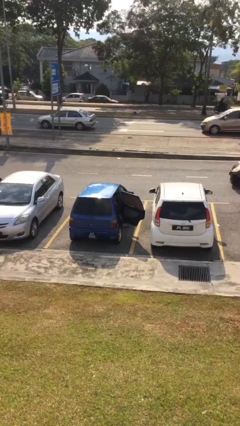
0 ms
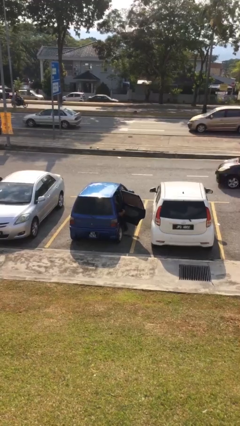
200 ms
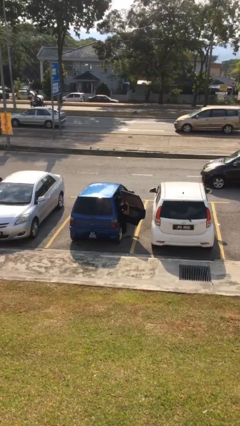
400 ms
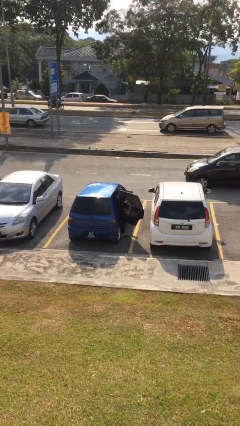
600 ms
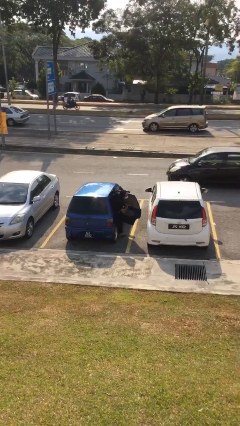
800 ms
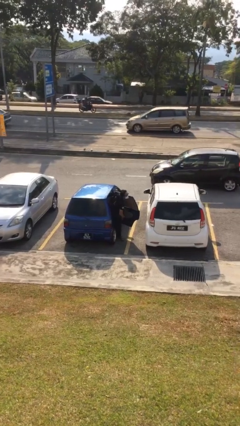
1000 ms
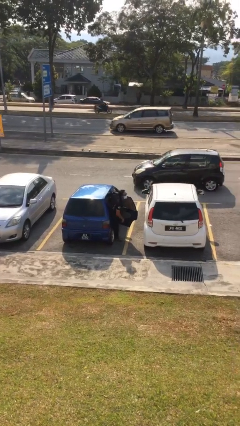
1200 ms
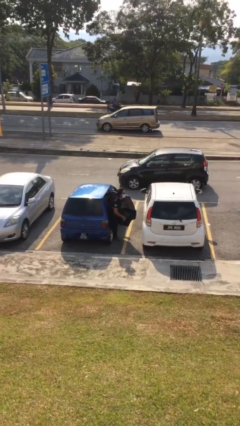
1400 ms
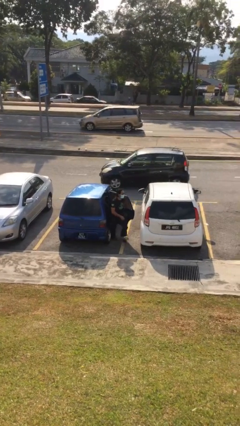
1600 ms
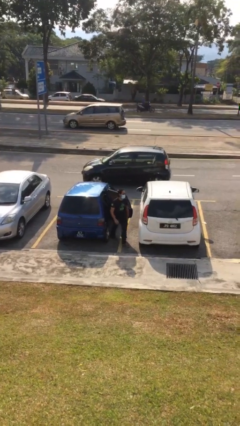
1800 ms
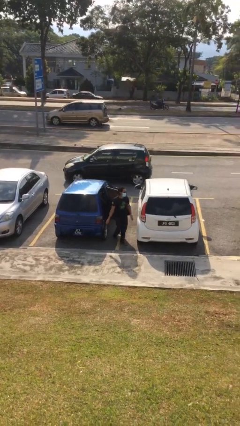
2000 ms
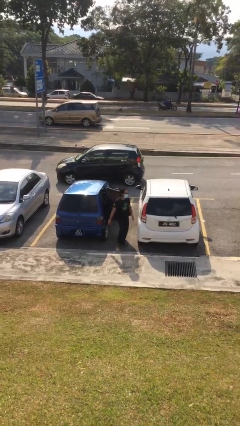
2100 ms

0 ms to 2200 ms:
person exits car

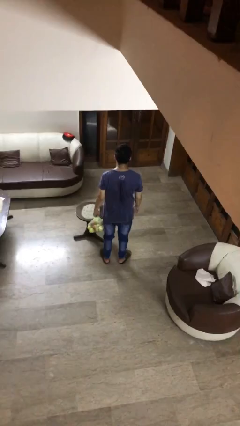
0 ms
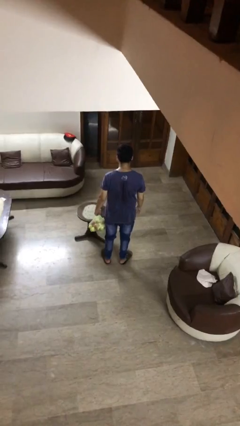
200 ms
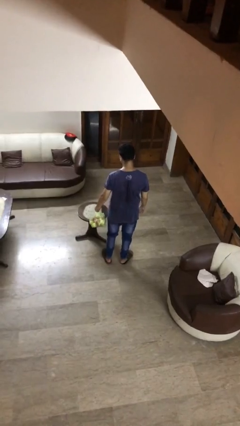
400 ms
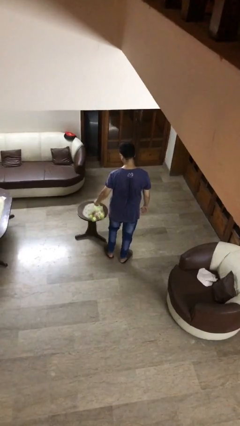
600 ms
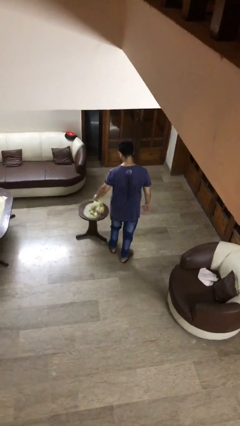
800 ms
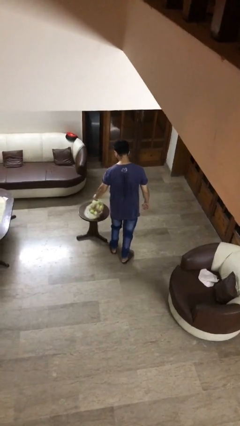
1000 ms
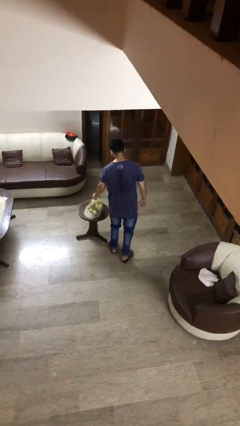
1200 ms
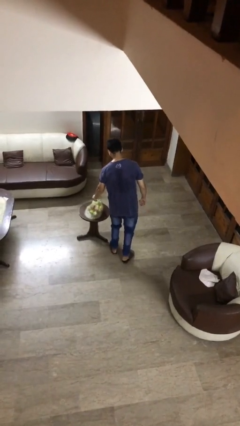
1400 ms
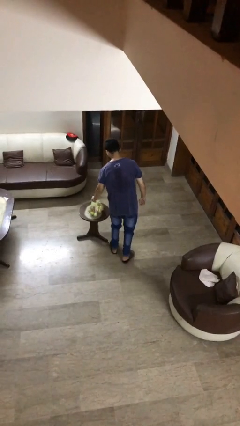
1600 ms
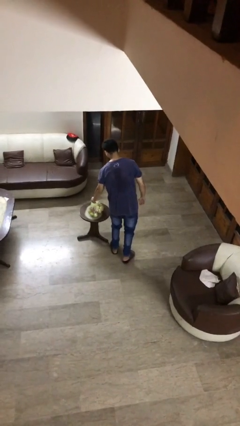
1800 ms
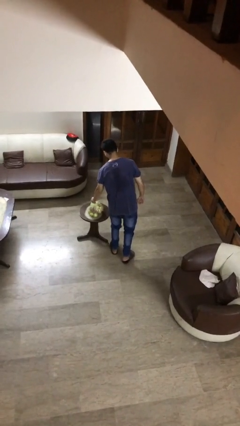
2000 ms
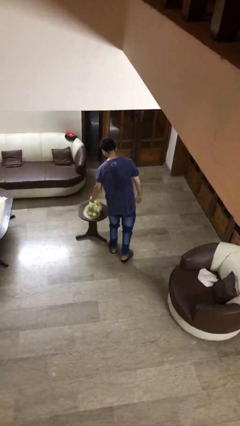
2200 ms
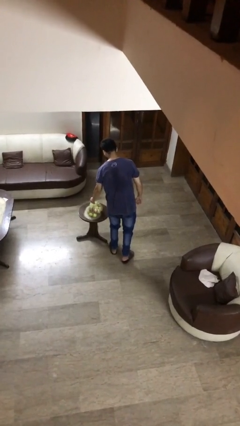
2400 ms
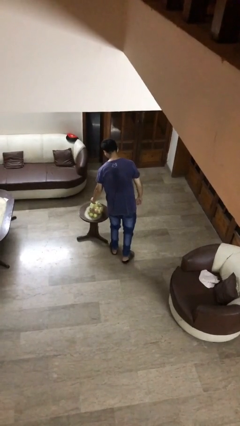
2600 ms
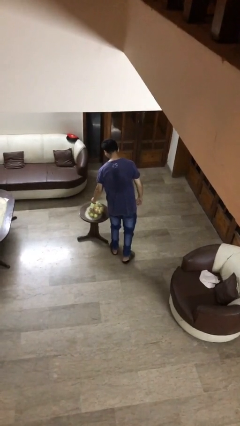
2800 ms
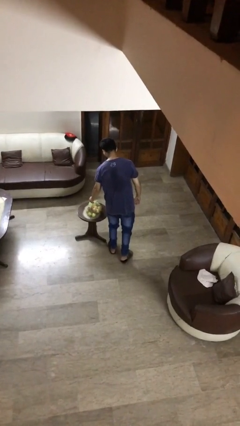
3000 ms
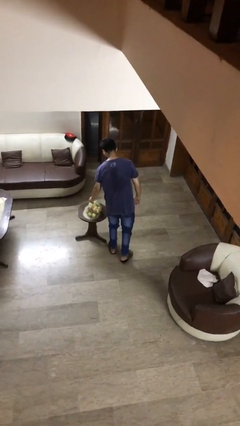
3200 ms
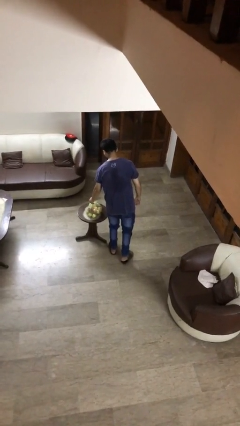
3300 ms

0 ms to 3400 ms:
person puts down object on table

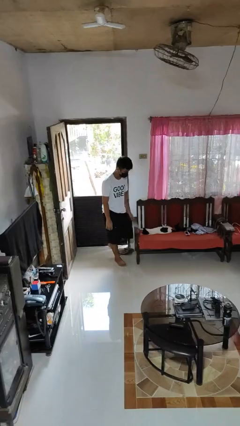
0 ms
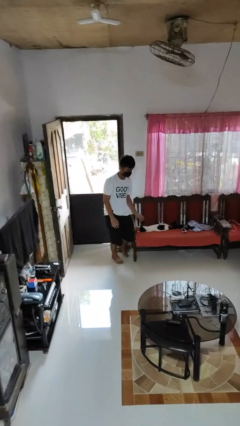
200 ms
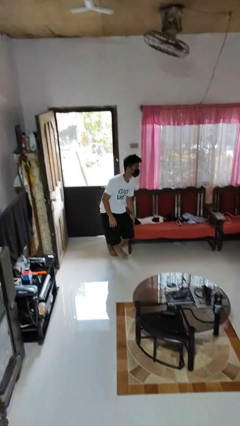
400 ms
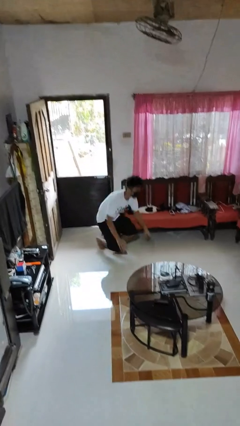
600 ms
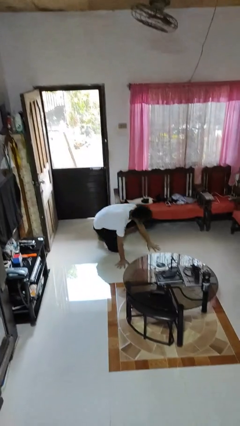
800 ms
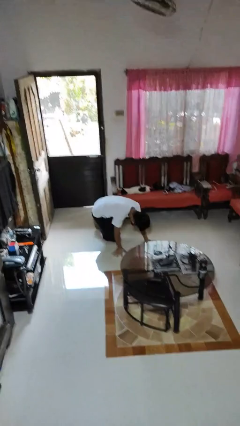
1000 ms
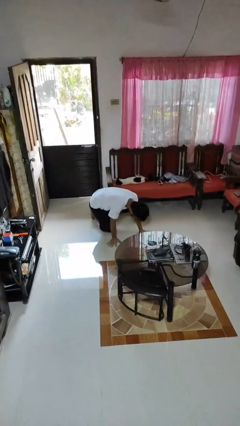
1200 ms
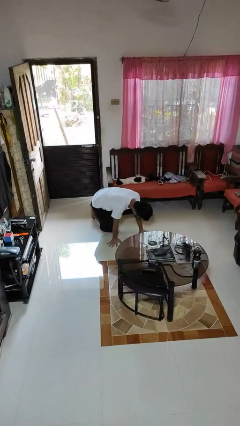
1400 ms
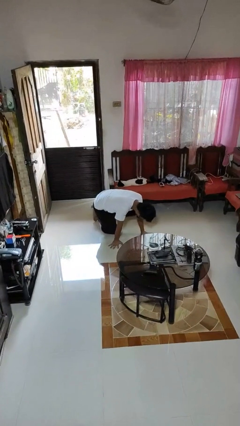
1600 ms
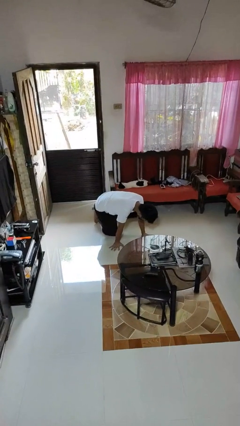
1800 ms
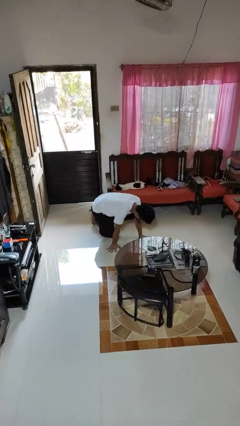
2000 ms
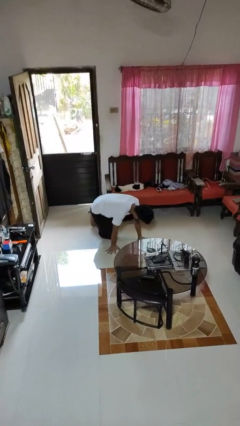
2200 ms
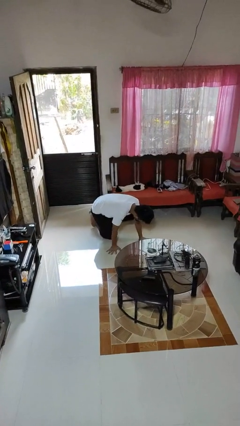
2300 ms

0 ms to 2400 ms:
person trips on object on floor

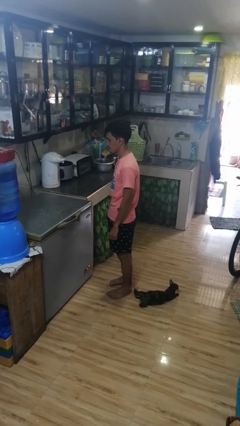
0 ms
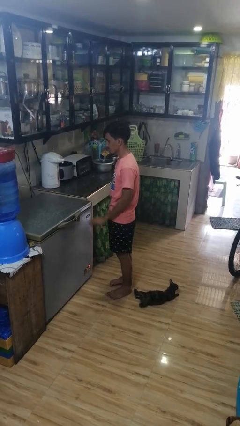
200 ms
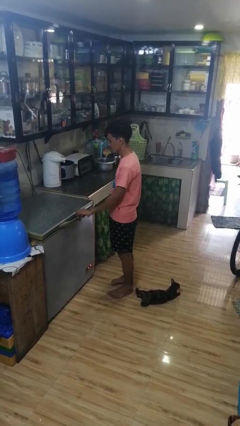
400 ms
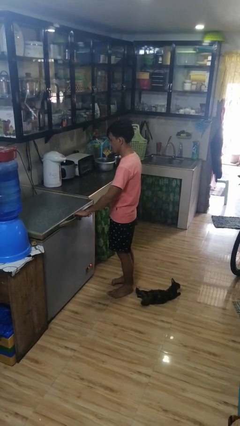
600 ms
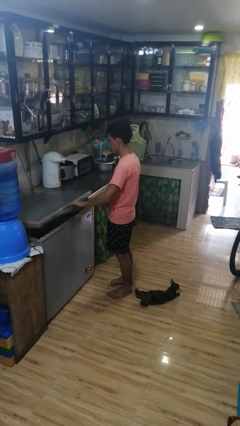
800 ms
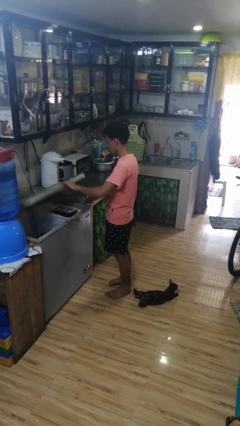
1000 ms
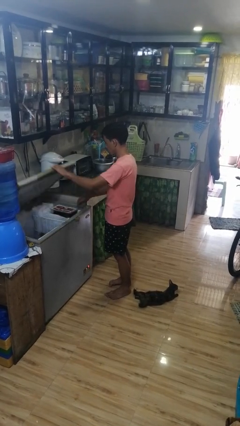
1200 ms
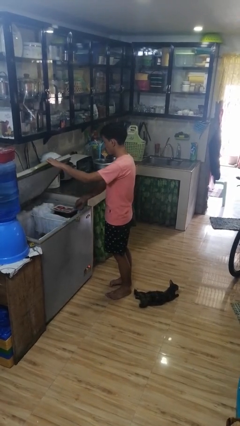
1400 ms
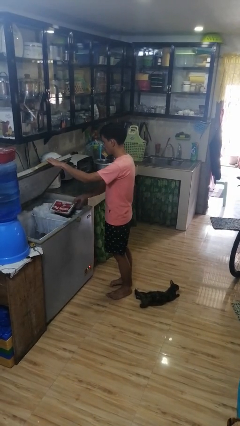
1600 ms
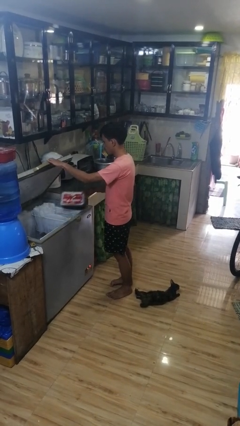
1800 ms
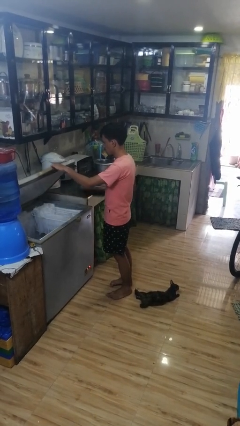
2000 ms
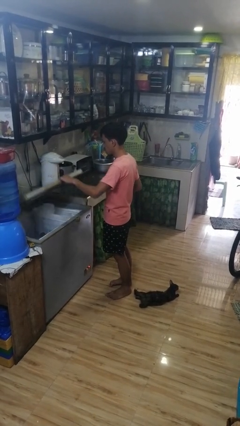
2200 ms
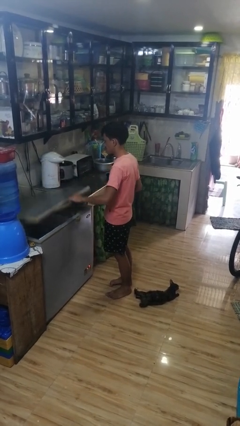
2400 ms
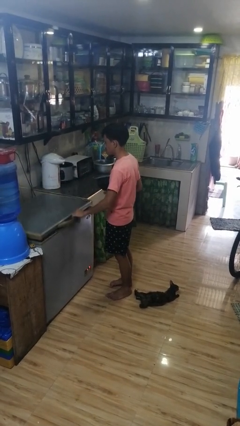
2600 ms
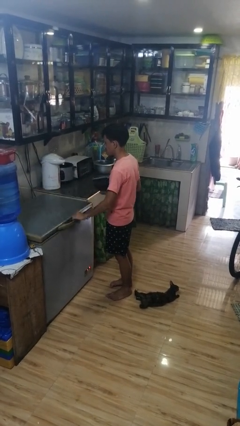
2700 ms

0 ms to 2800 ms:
person takes object from refrigerator

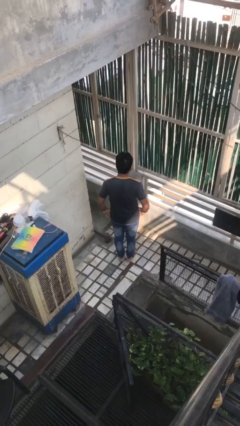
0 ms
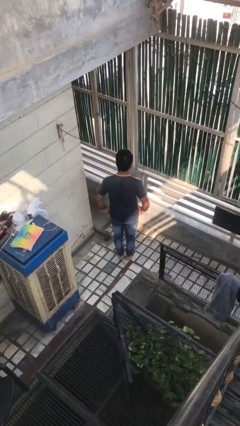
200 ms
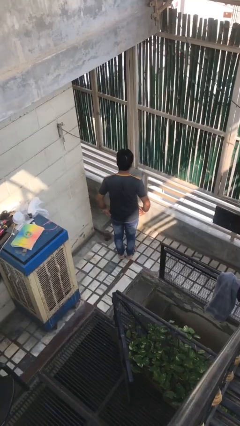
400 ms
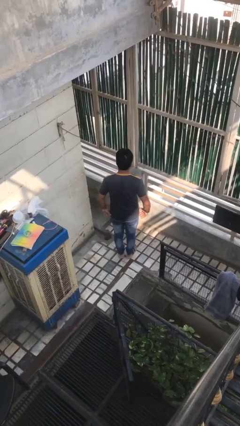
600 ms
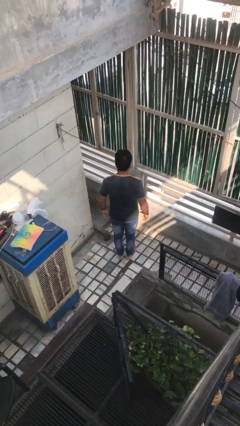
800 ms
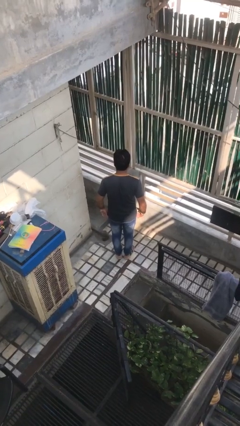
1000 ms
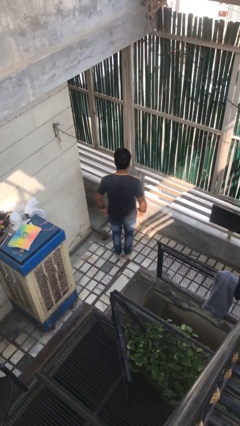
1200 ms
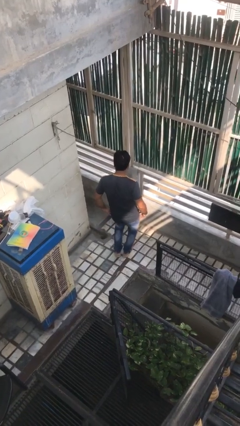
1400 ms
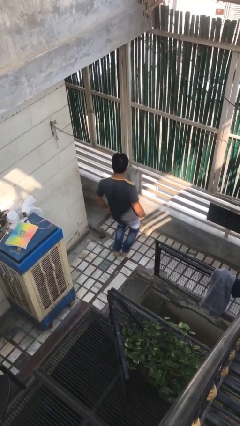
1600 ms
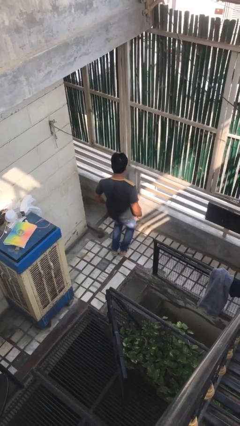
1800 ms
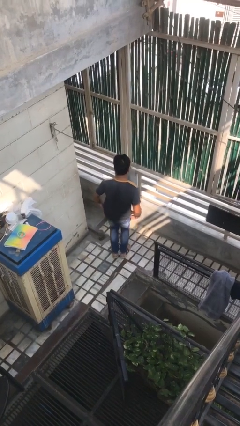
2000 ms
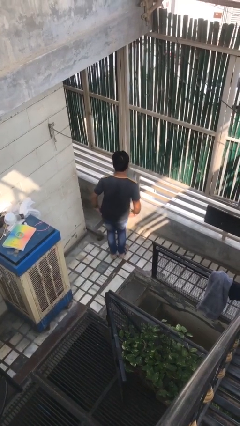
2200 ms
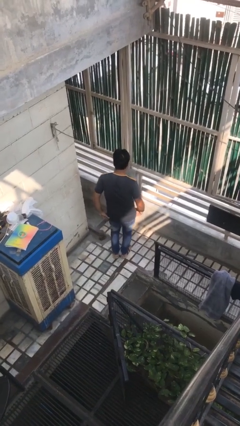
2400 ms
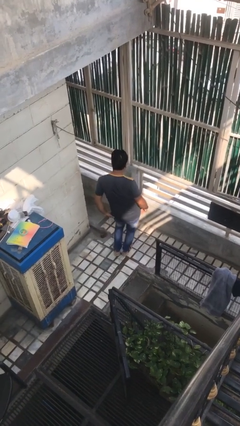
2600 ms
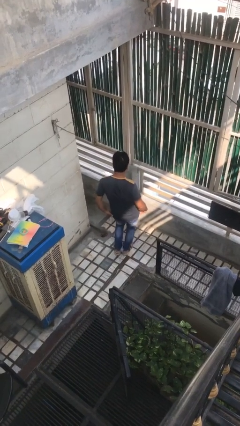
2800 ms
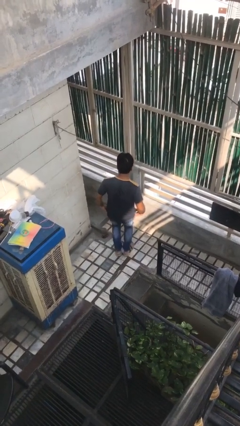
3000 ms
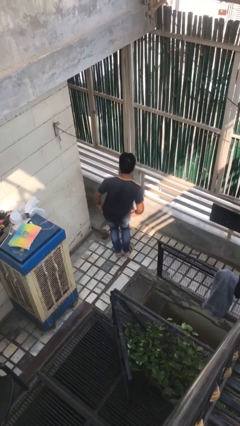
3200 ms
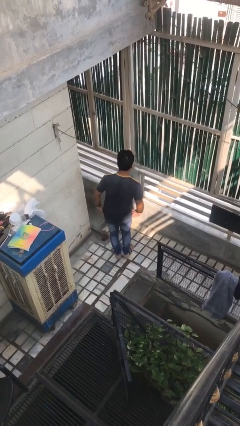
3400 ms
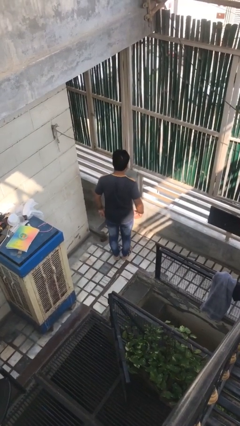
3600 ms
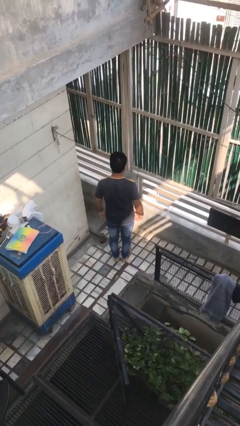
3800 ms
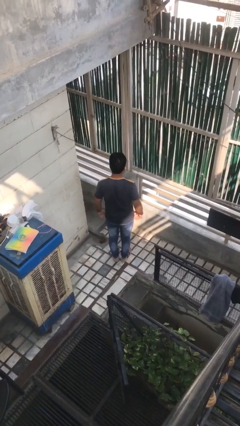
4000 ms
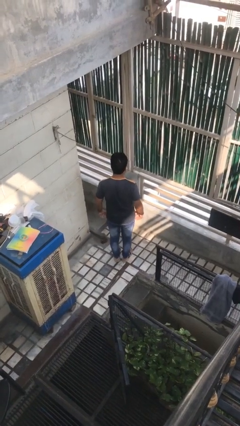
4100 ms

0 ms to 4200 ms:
person wiggles hips

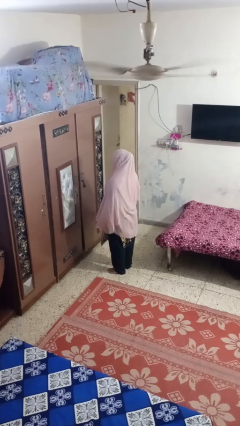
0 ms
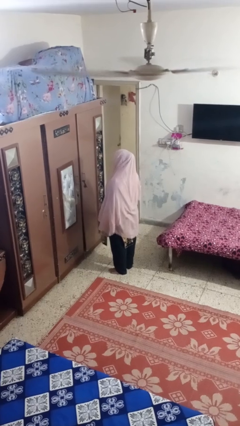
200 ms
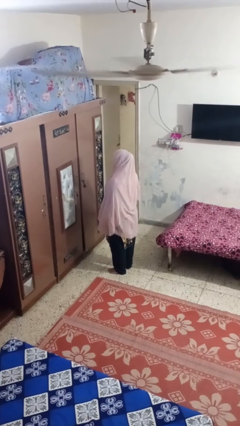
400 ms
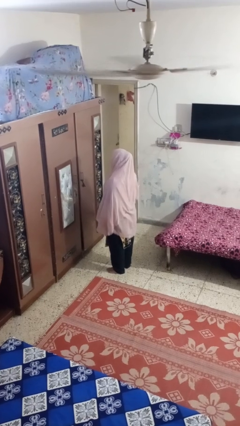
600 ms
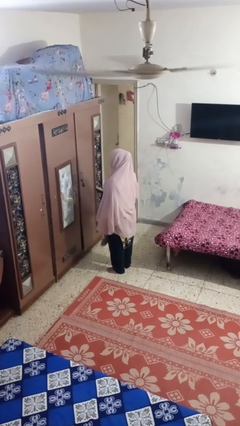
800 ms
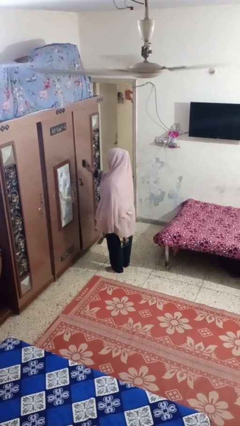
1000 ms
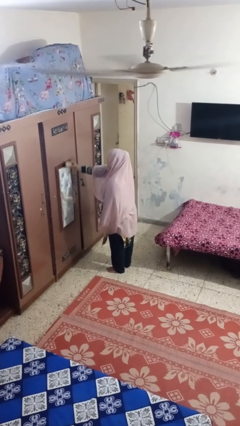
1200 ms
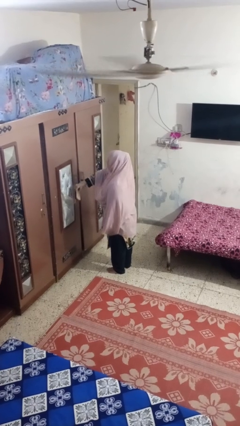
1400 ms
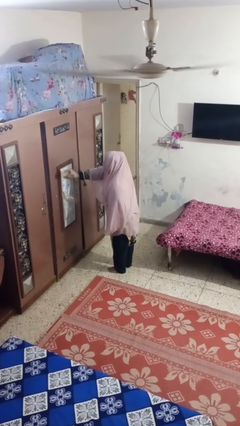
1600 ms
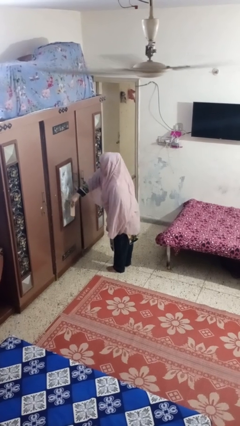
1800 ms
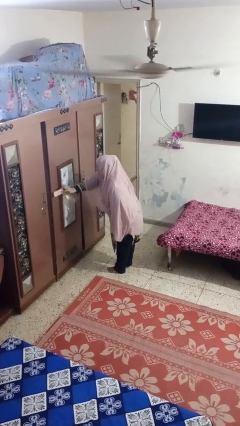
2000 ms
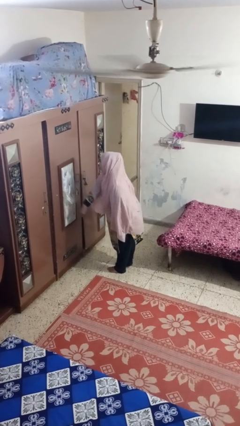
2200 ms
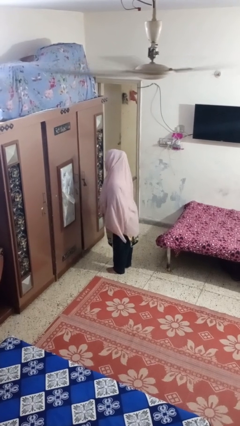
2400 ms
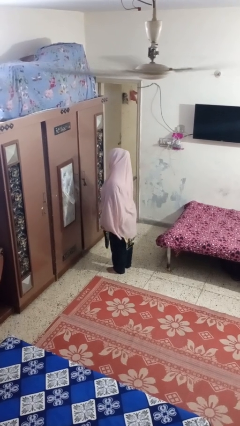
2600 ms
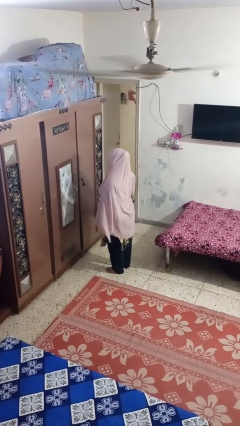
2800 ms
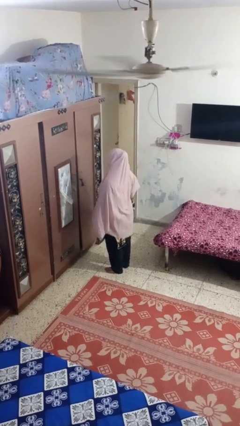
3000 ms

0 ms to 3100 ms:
person dusts furniture
